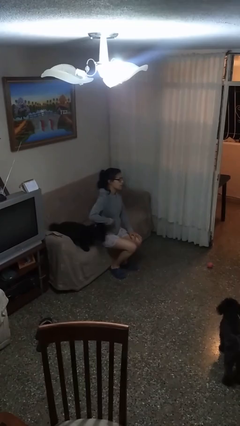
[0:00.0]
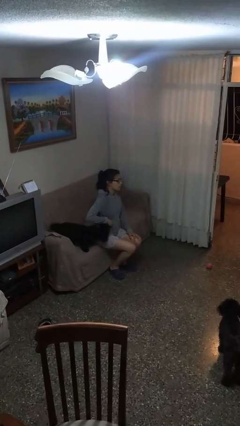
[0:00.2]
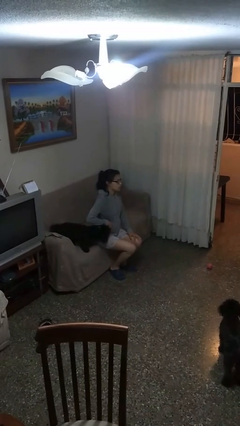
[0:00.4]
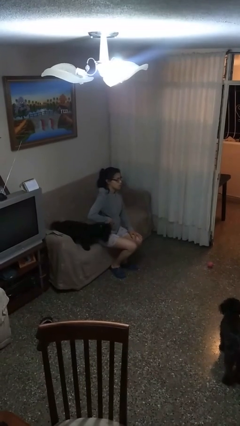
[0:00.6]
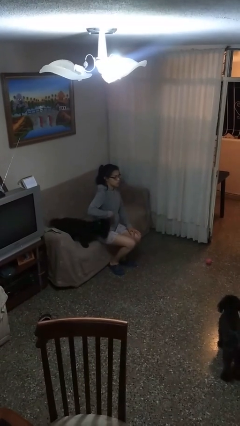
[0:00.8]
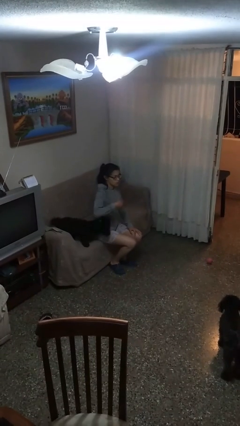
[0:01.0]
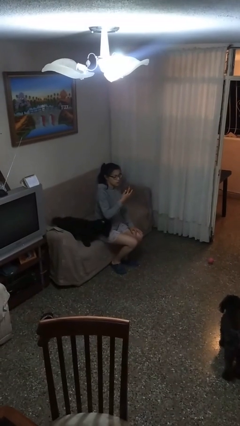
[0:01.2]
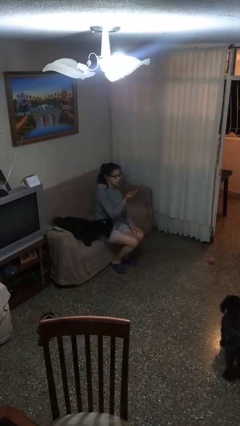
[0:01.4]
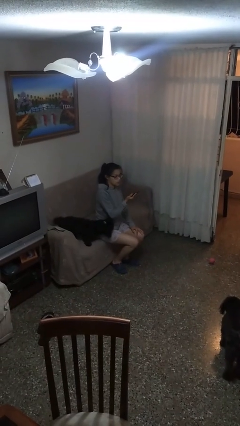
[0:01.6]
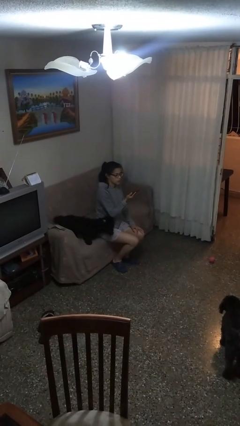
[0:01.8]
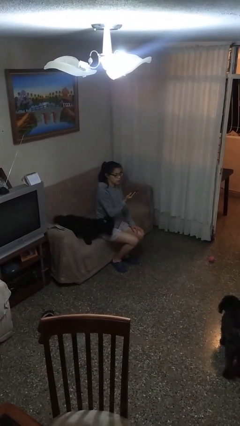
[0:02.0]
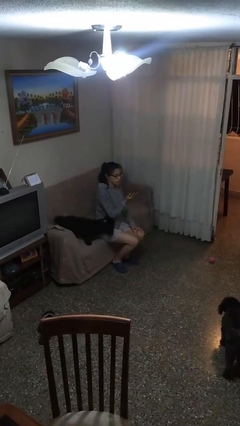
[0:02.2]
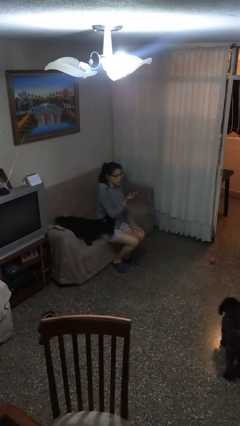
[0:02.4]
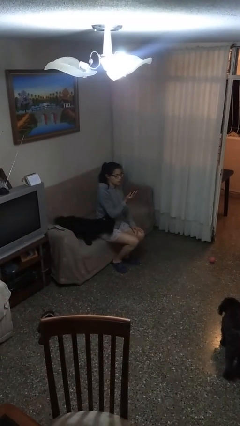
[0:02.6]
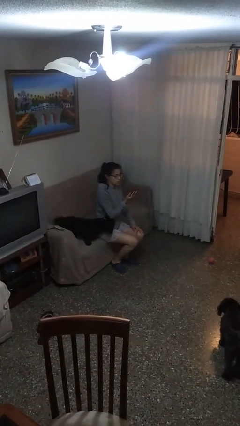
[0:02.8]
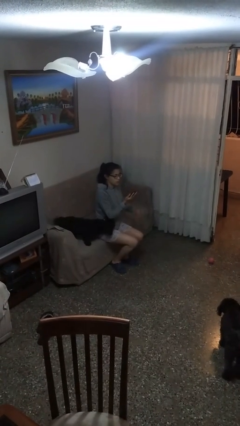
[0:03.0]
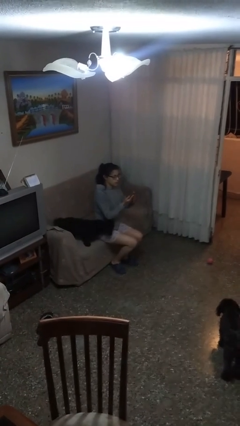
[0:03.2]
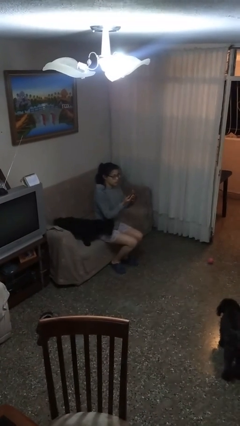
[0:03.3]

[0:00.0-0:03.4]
person takes phone from pocket

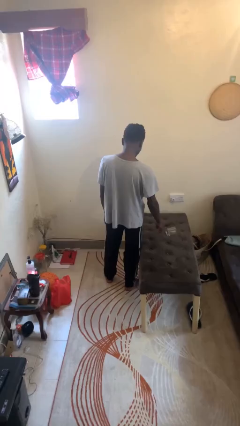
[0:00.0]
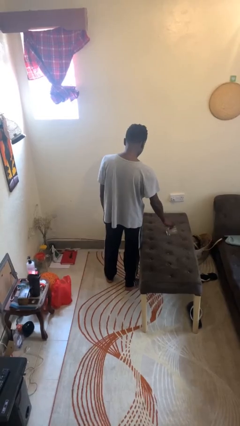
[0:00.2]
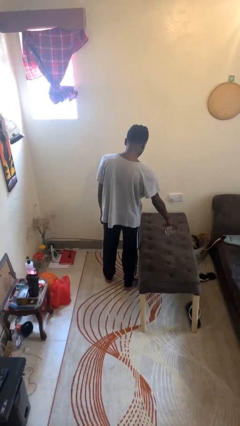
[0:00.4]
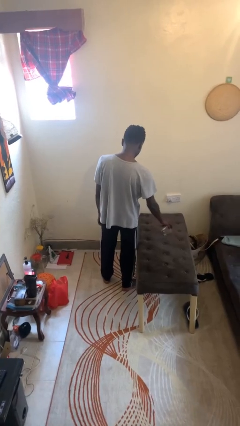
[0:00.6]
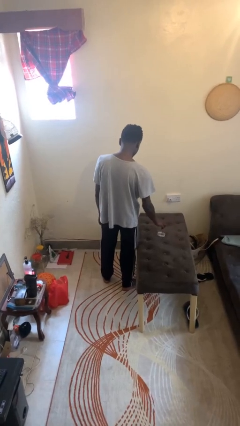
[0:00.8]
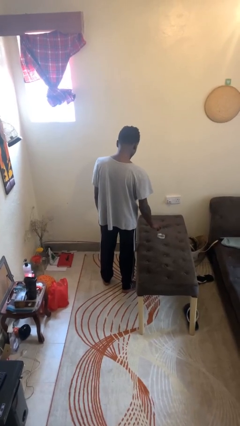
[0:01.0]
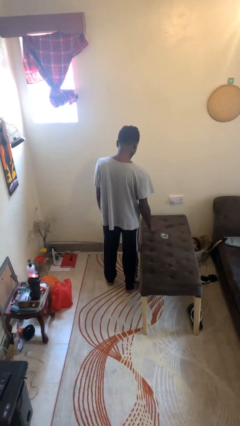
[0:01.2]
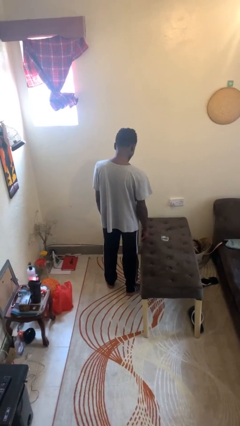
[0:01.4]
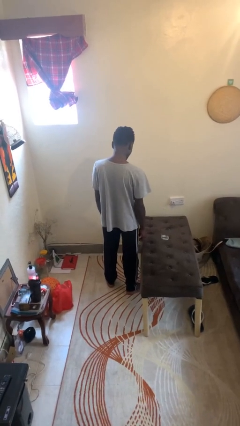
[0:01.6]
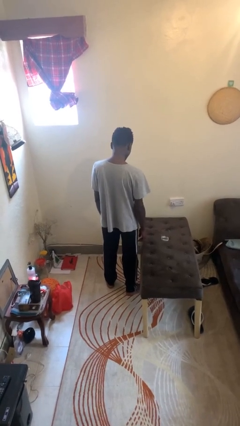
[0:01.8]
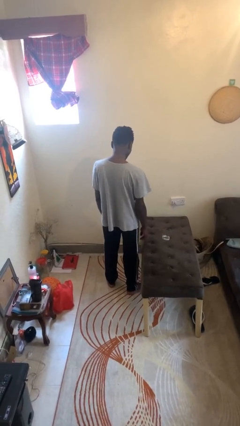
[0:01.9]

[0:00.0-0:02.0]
person sets upright glass

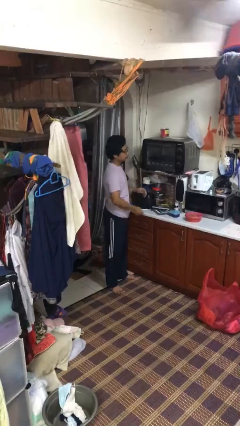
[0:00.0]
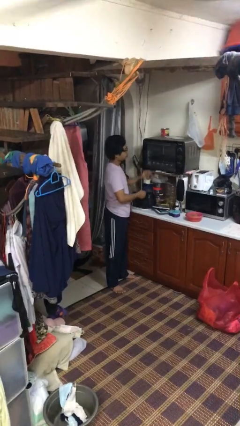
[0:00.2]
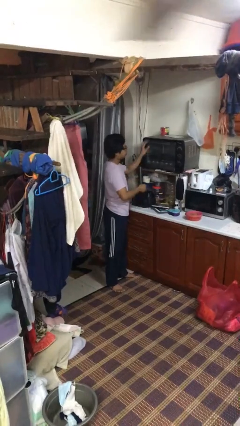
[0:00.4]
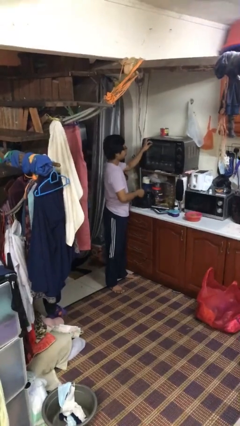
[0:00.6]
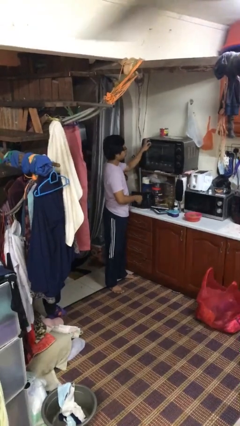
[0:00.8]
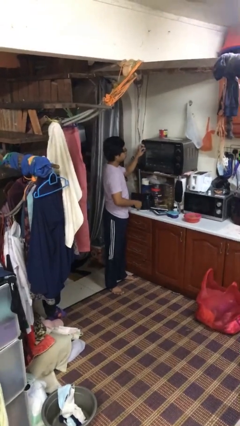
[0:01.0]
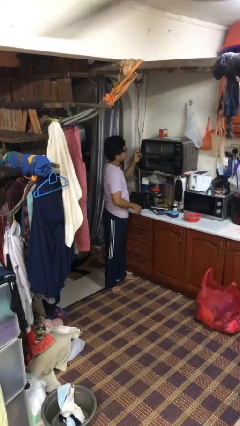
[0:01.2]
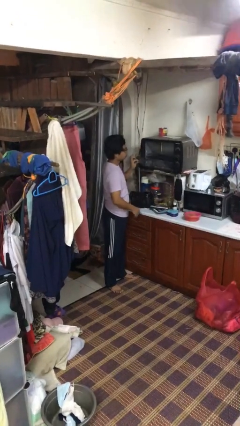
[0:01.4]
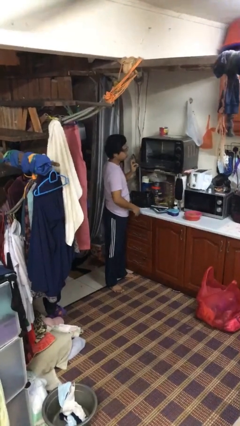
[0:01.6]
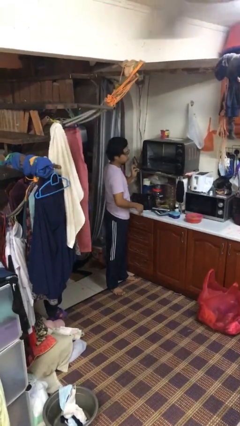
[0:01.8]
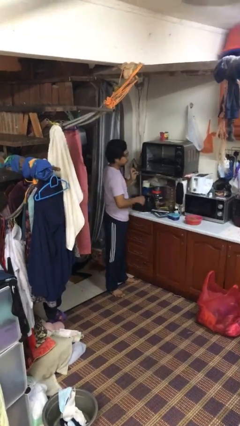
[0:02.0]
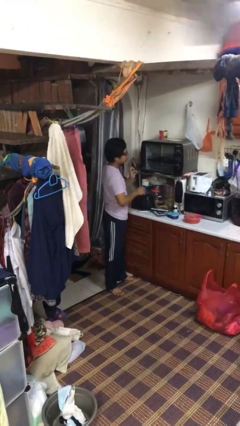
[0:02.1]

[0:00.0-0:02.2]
person opens oven door

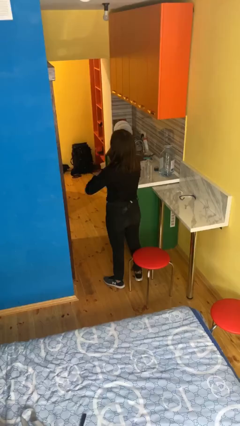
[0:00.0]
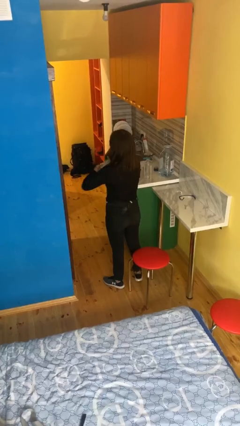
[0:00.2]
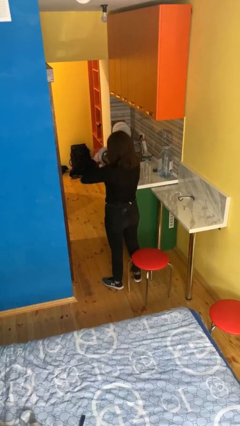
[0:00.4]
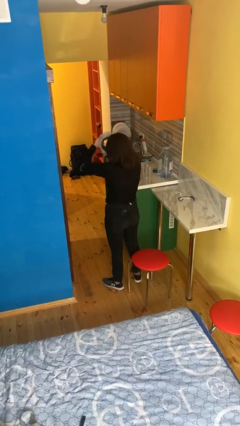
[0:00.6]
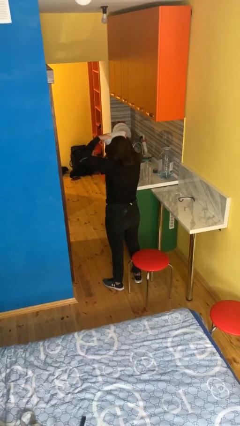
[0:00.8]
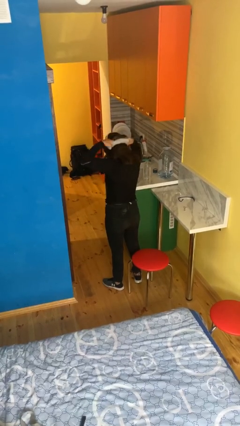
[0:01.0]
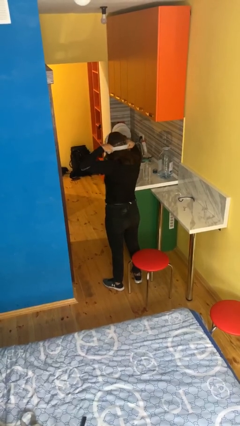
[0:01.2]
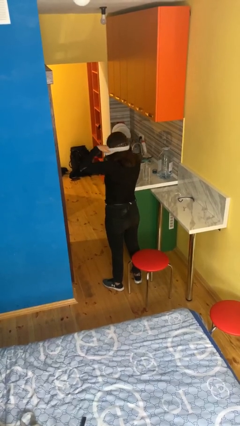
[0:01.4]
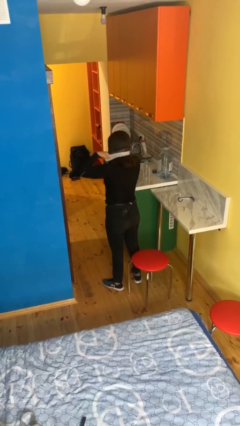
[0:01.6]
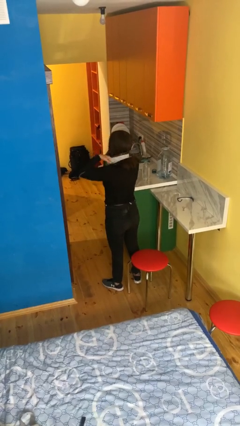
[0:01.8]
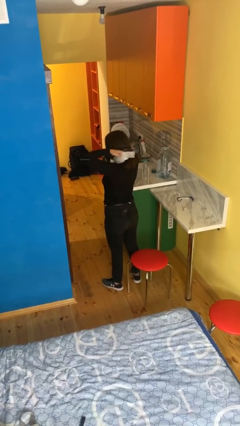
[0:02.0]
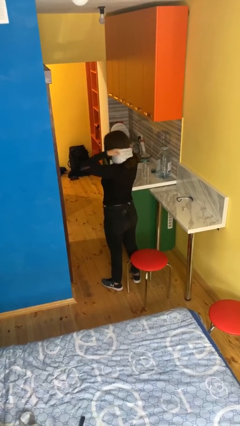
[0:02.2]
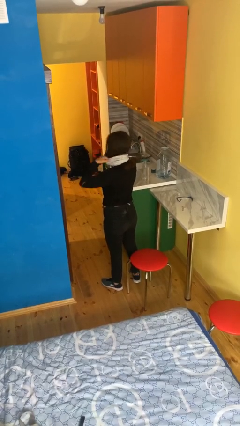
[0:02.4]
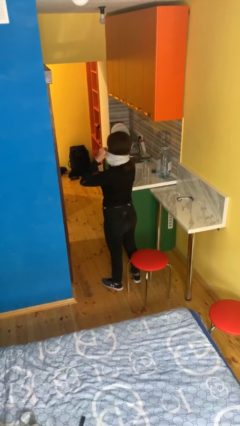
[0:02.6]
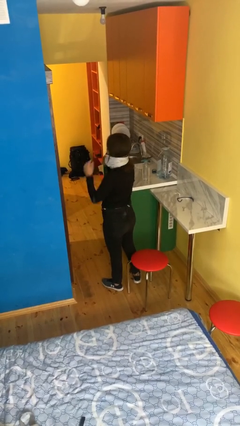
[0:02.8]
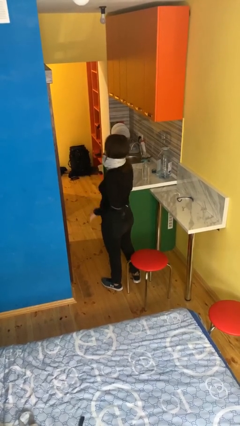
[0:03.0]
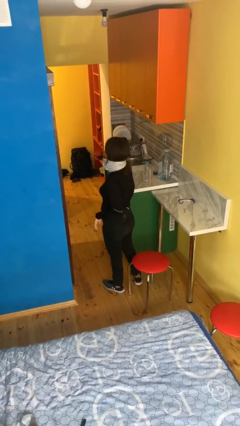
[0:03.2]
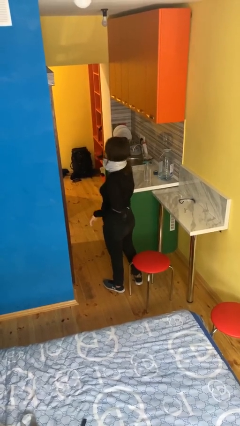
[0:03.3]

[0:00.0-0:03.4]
person puts on scarf

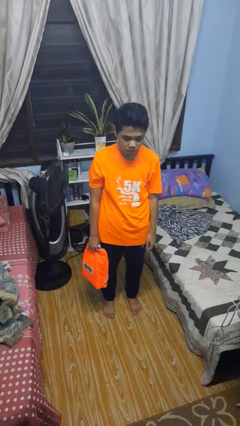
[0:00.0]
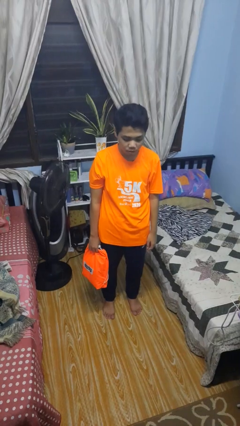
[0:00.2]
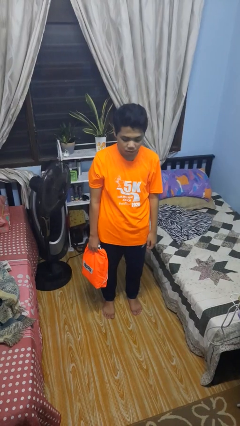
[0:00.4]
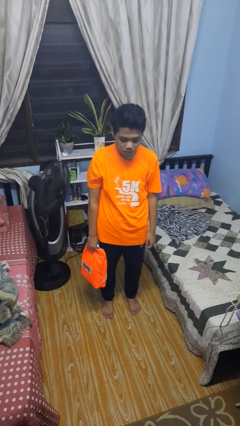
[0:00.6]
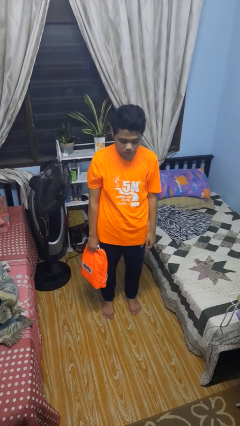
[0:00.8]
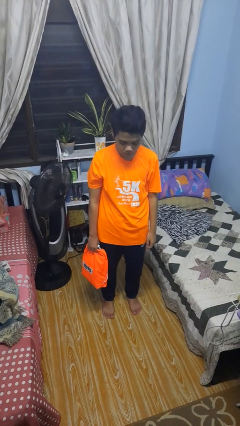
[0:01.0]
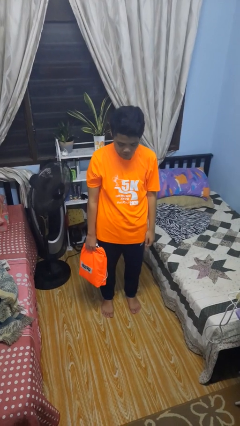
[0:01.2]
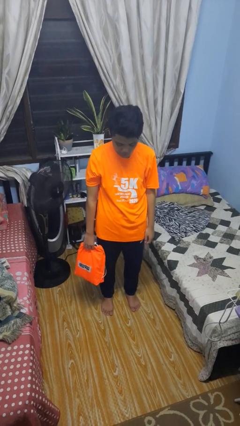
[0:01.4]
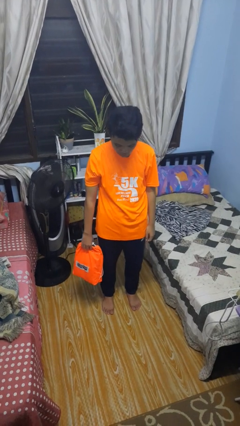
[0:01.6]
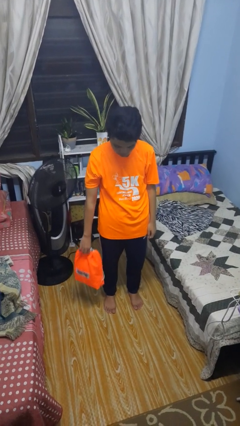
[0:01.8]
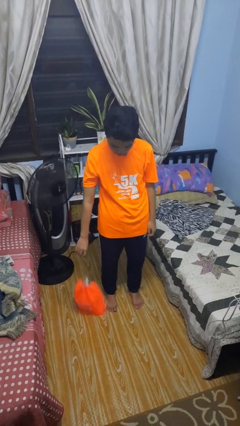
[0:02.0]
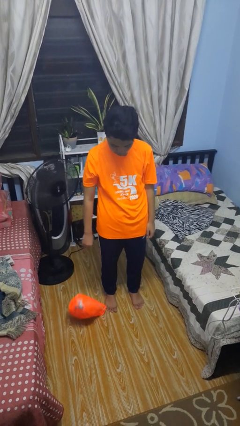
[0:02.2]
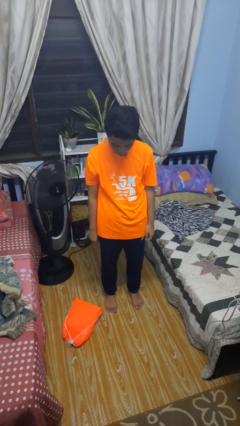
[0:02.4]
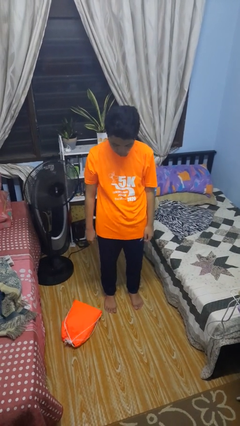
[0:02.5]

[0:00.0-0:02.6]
person drops object

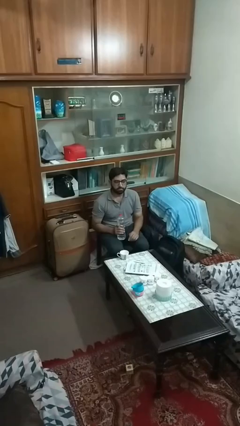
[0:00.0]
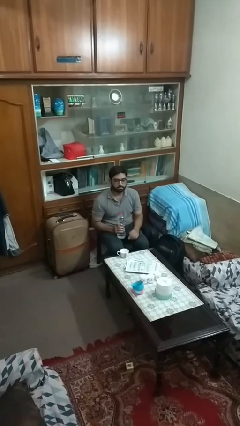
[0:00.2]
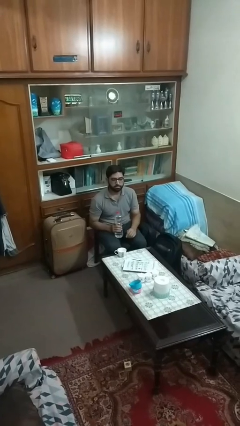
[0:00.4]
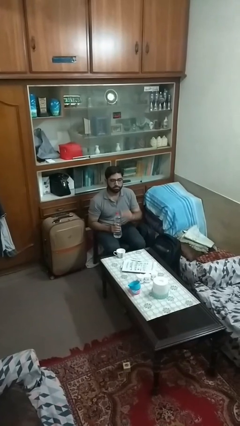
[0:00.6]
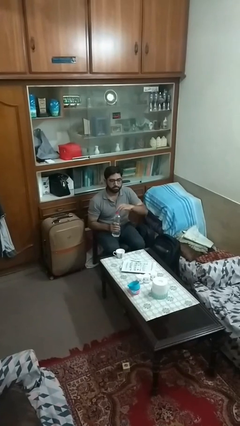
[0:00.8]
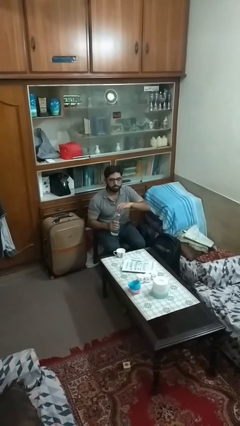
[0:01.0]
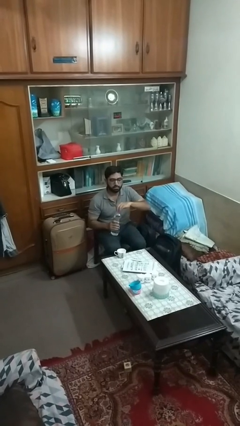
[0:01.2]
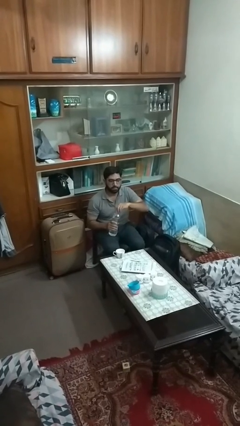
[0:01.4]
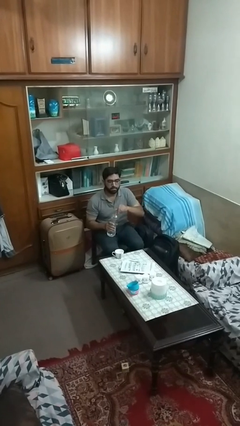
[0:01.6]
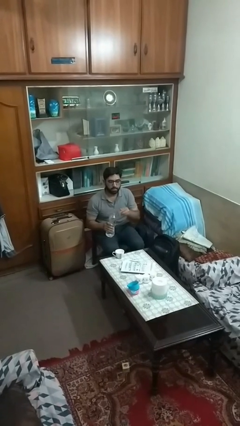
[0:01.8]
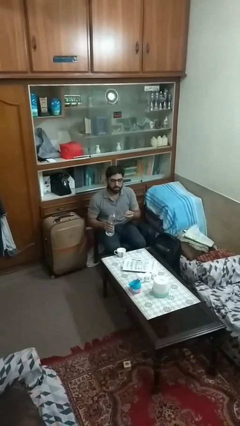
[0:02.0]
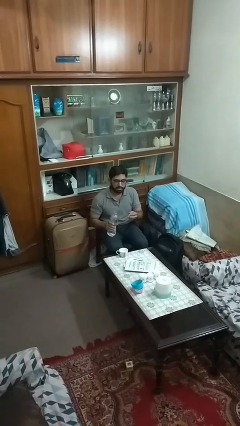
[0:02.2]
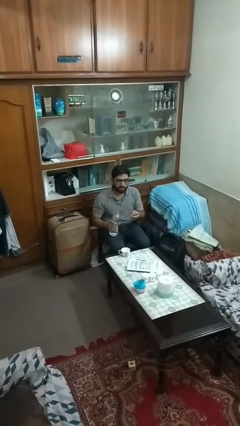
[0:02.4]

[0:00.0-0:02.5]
person unscrews lid from bottle

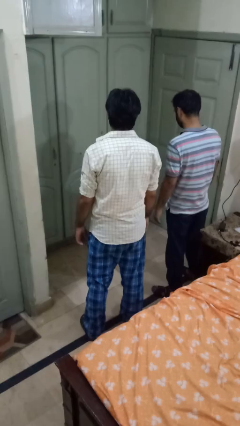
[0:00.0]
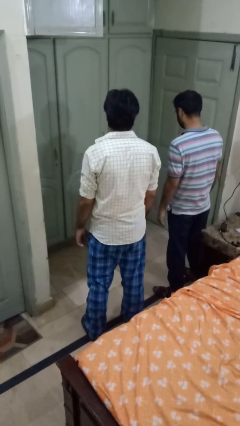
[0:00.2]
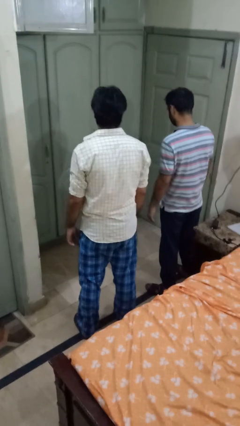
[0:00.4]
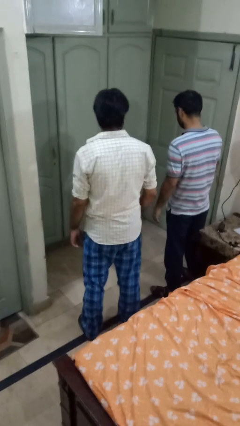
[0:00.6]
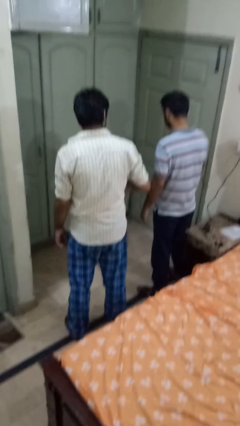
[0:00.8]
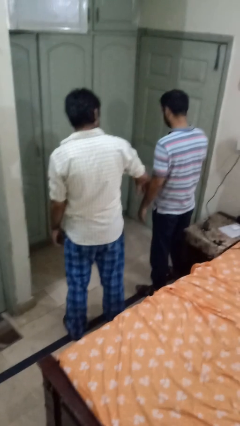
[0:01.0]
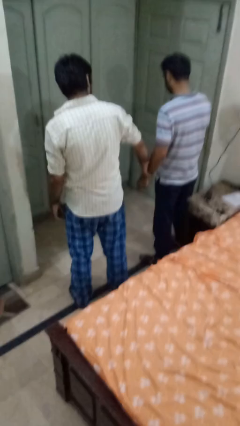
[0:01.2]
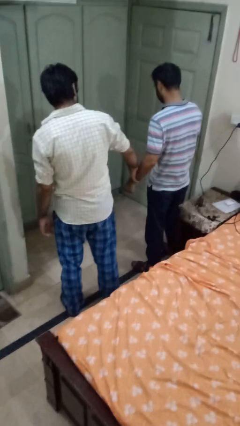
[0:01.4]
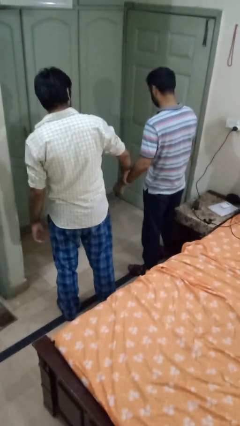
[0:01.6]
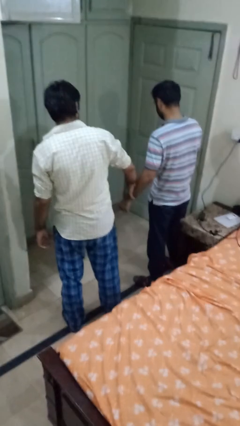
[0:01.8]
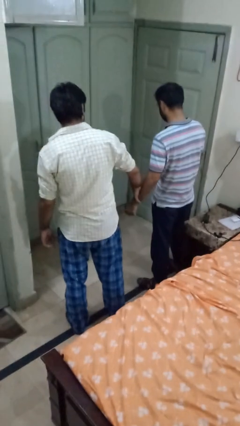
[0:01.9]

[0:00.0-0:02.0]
person grabs person by forearm
